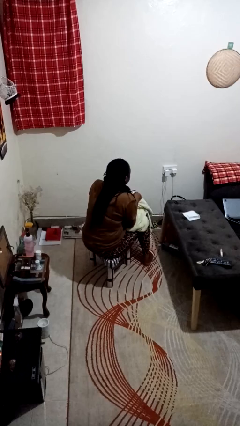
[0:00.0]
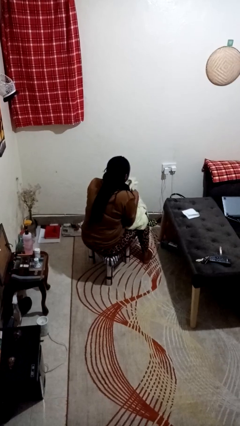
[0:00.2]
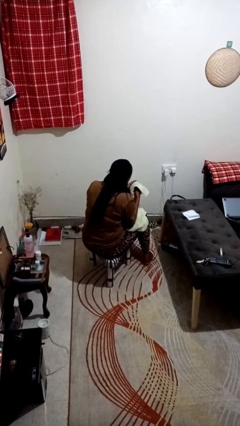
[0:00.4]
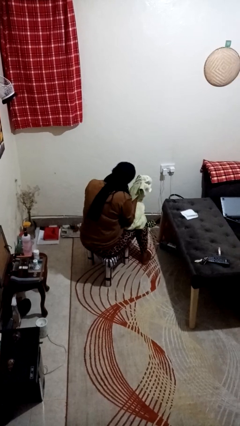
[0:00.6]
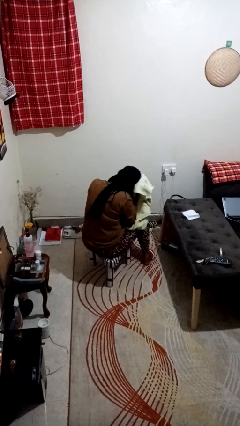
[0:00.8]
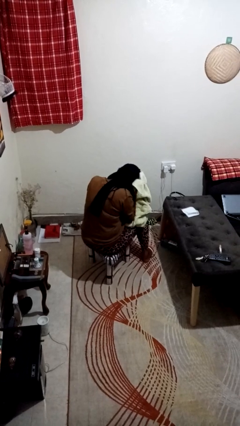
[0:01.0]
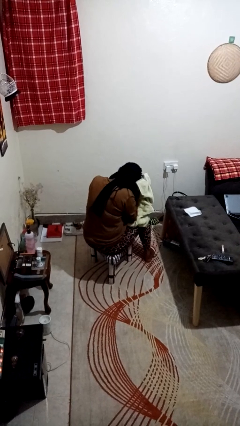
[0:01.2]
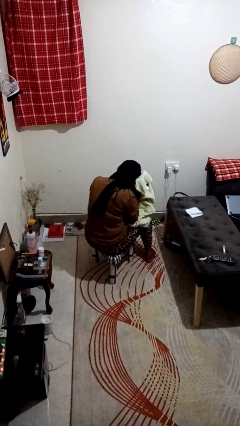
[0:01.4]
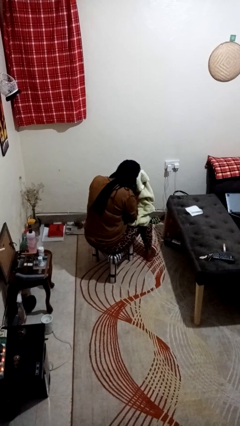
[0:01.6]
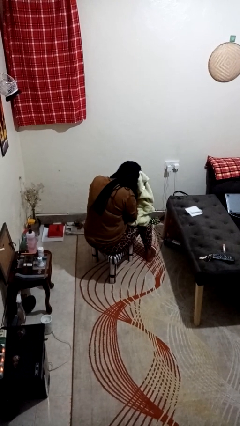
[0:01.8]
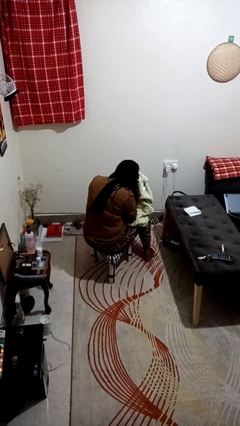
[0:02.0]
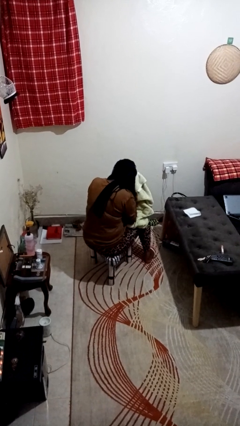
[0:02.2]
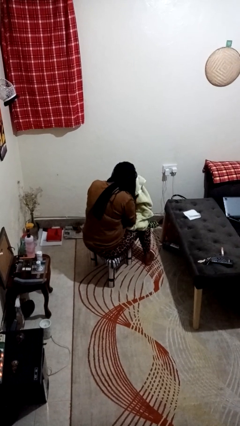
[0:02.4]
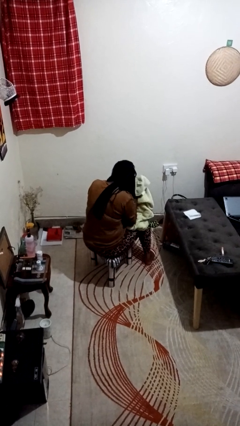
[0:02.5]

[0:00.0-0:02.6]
person dries hair with towel

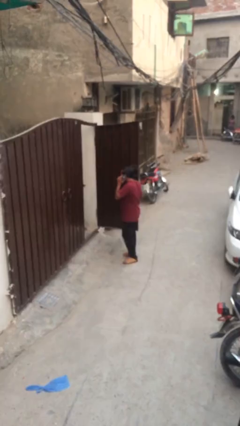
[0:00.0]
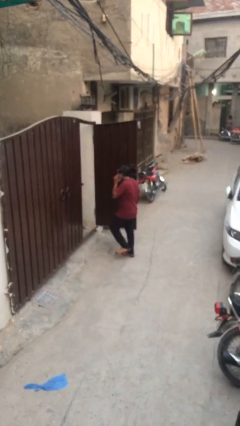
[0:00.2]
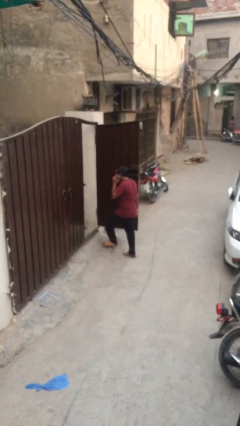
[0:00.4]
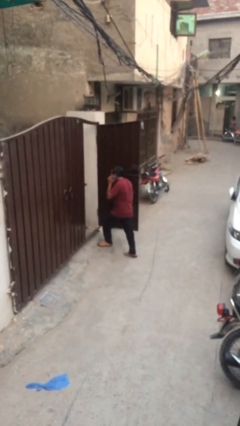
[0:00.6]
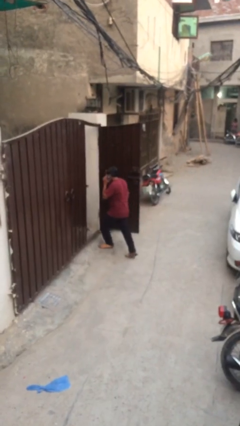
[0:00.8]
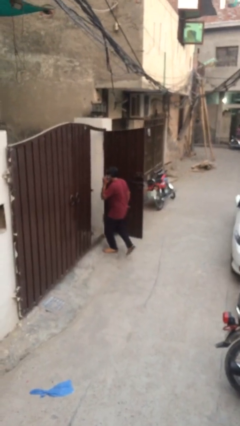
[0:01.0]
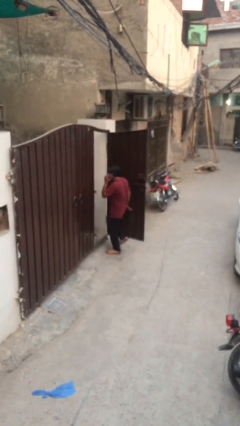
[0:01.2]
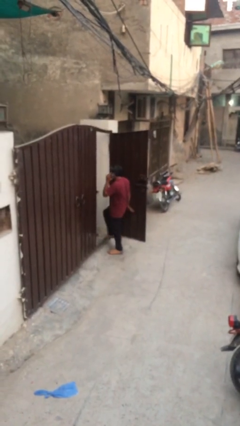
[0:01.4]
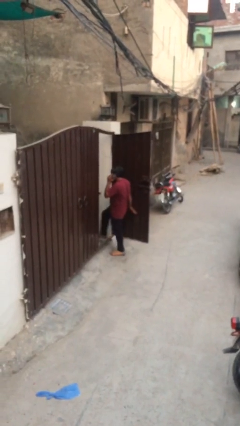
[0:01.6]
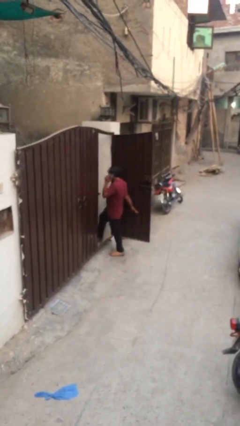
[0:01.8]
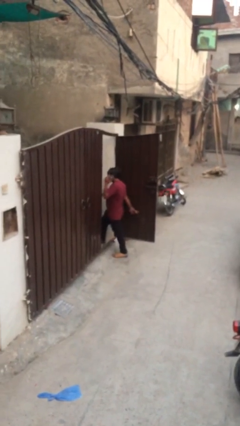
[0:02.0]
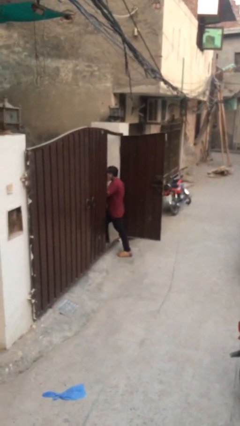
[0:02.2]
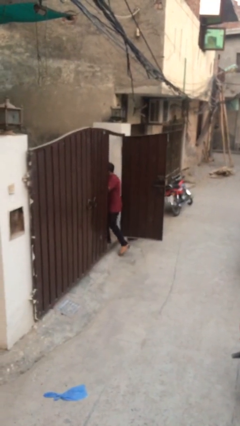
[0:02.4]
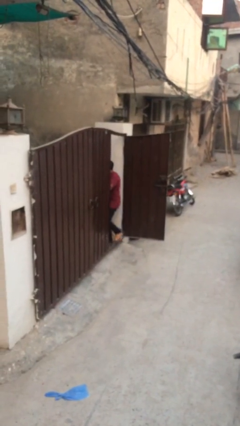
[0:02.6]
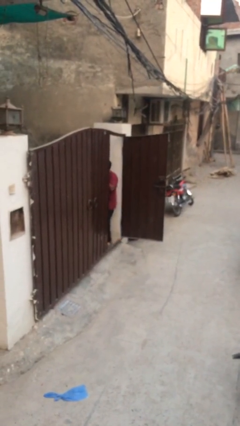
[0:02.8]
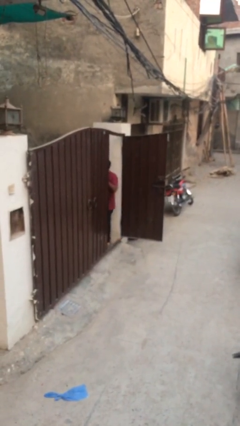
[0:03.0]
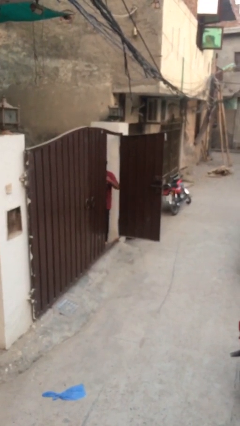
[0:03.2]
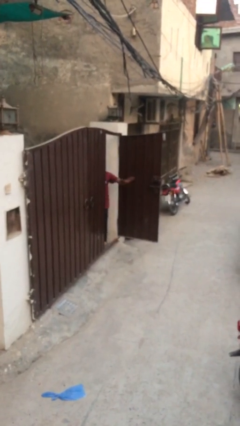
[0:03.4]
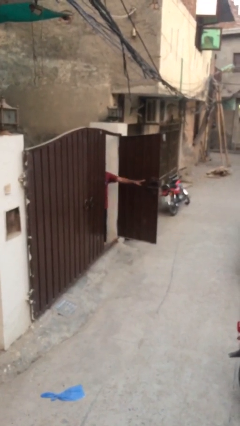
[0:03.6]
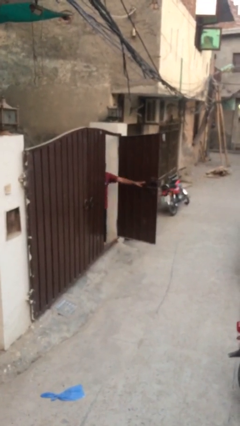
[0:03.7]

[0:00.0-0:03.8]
person exits scene through structure

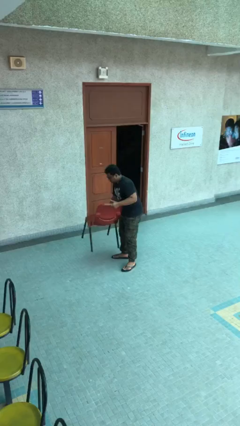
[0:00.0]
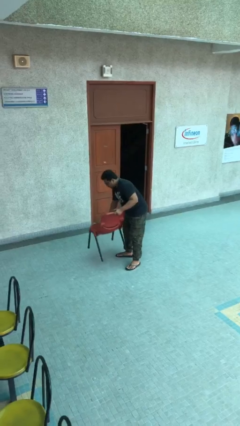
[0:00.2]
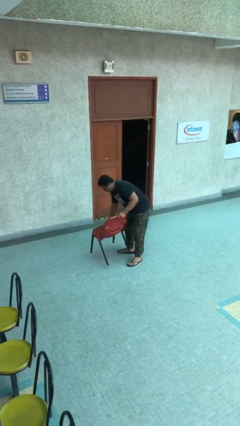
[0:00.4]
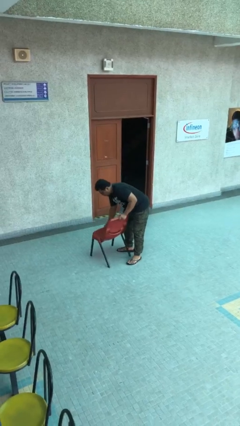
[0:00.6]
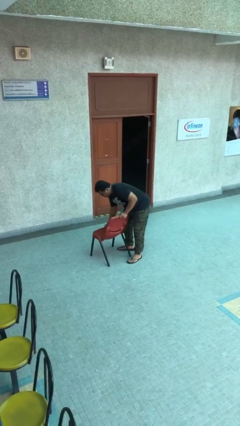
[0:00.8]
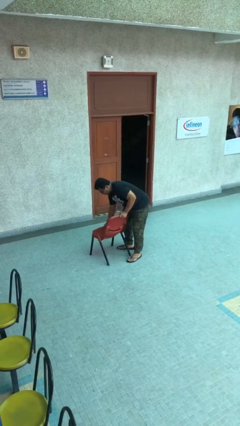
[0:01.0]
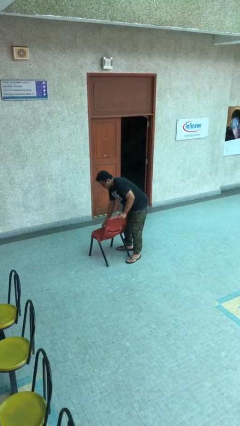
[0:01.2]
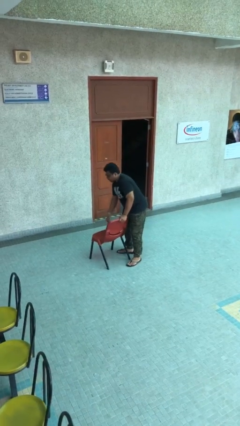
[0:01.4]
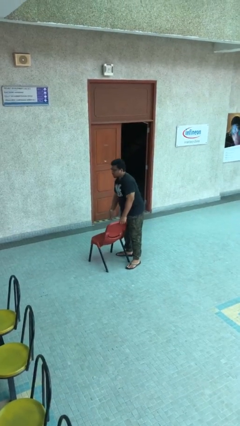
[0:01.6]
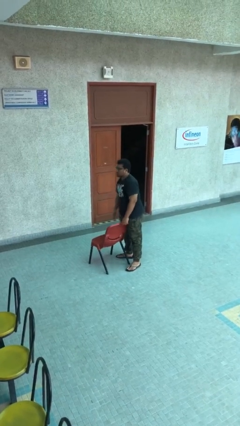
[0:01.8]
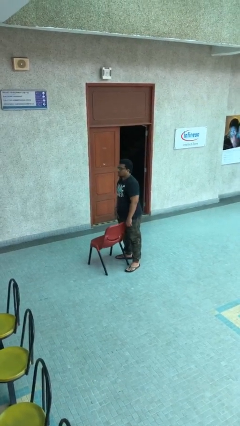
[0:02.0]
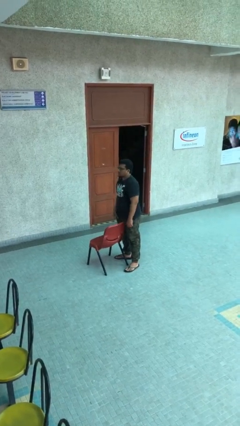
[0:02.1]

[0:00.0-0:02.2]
person puts down object on floor

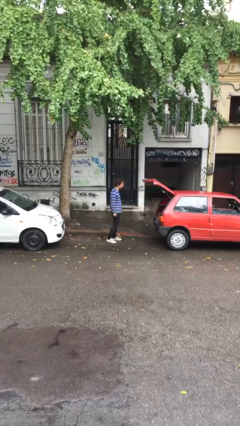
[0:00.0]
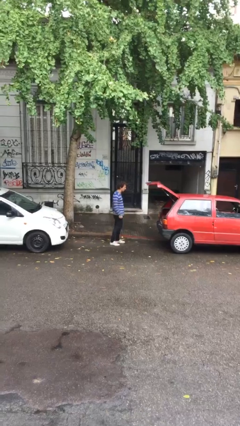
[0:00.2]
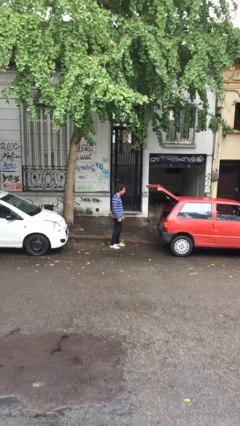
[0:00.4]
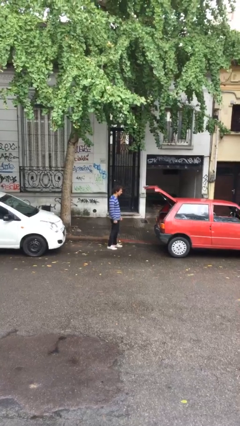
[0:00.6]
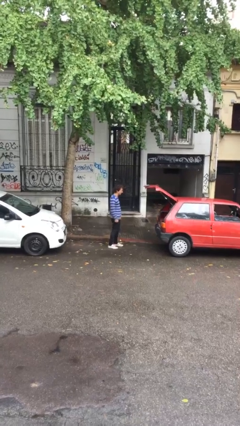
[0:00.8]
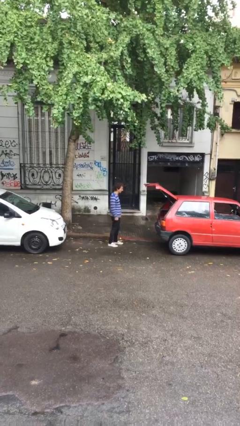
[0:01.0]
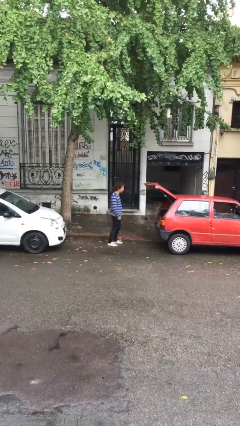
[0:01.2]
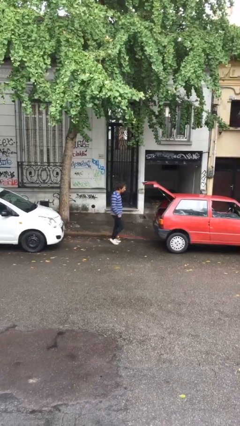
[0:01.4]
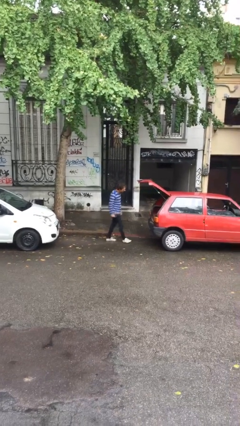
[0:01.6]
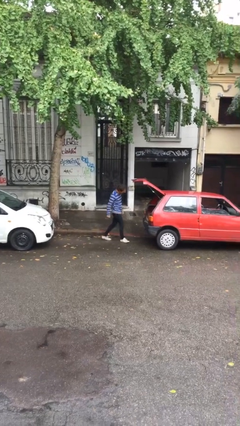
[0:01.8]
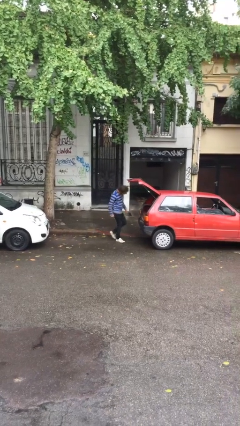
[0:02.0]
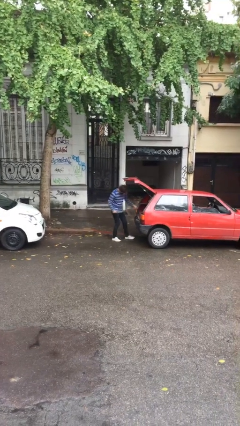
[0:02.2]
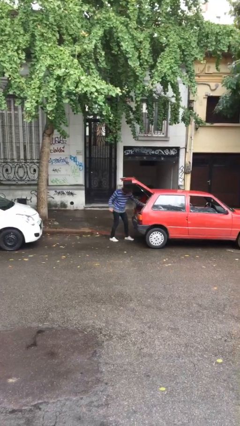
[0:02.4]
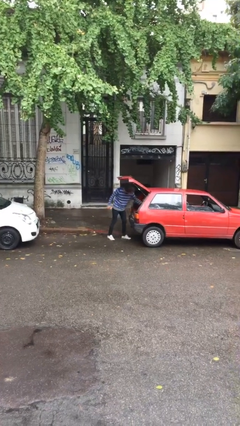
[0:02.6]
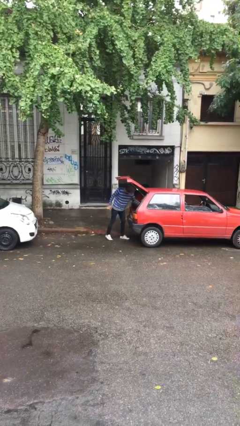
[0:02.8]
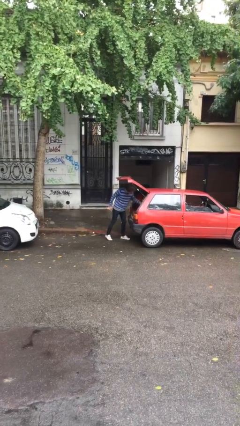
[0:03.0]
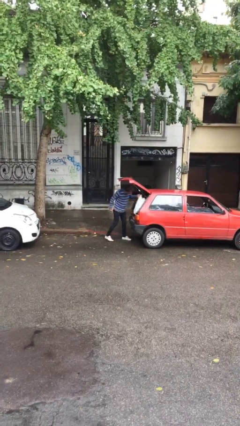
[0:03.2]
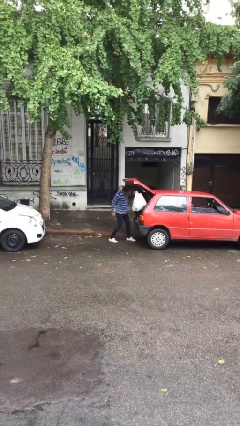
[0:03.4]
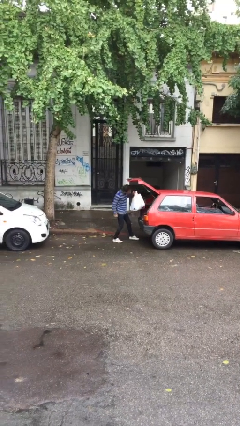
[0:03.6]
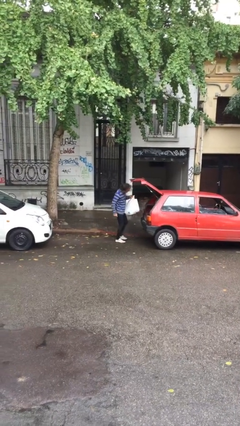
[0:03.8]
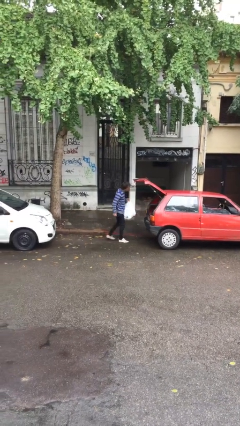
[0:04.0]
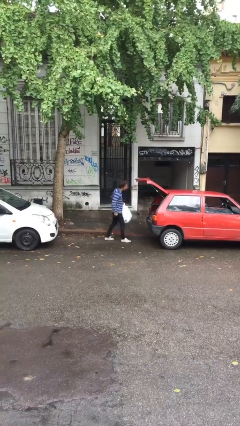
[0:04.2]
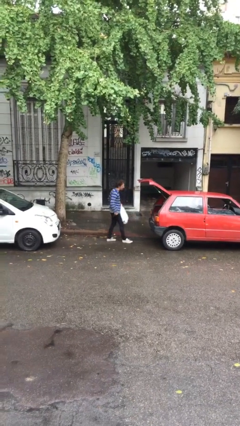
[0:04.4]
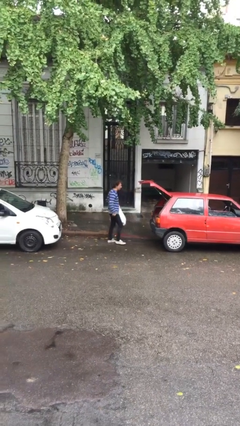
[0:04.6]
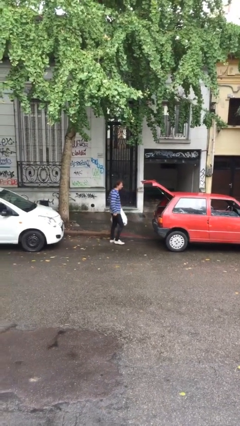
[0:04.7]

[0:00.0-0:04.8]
person unloads car

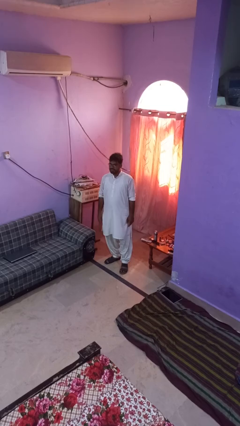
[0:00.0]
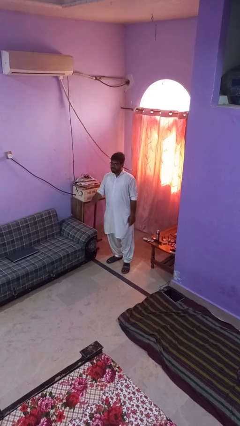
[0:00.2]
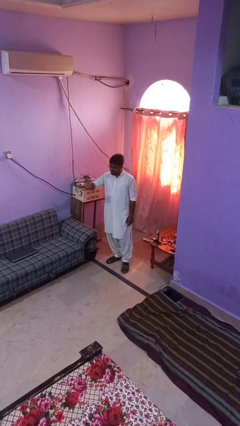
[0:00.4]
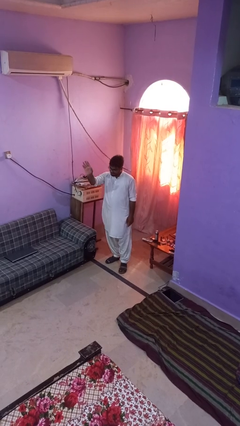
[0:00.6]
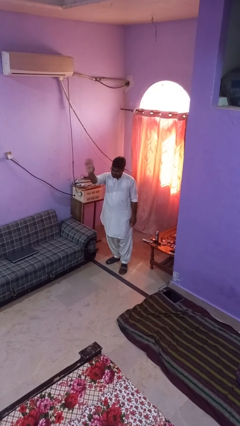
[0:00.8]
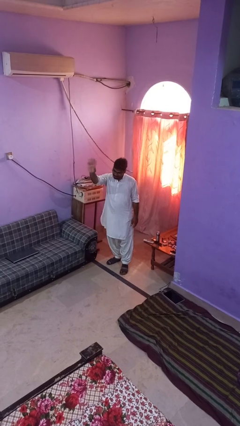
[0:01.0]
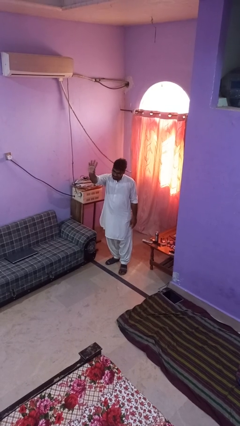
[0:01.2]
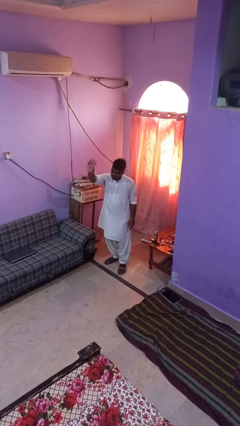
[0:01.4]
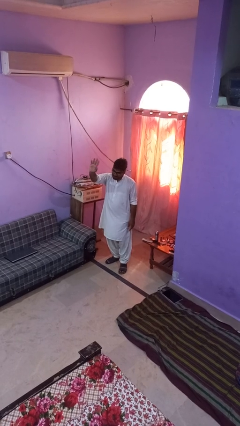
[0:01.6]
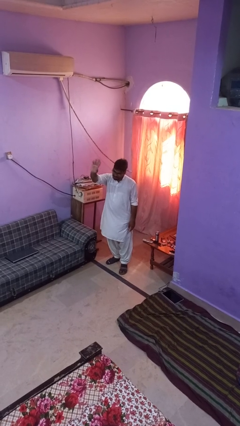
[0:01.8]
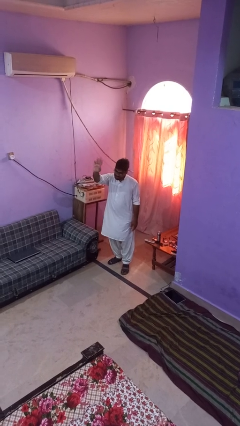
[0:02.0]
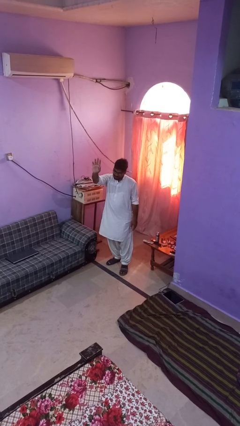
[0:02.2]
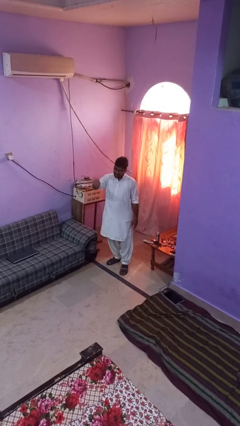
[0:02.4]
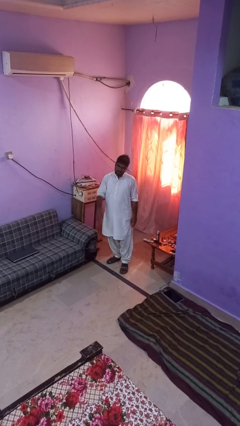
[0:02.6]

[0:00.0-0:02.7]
person waves at person

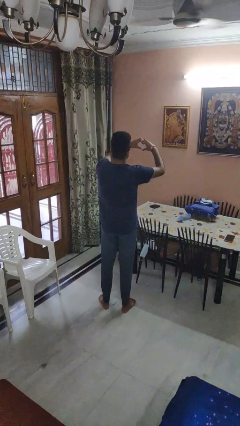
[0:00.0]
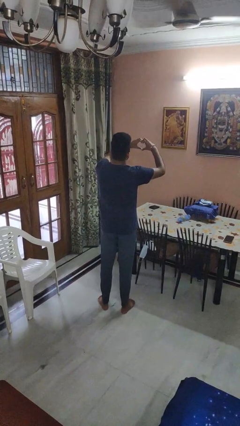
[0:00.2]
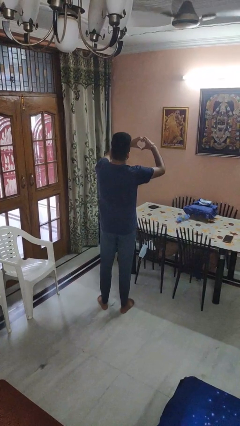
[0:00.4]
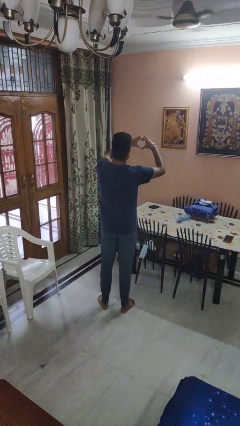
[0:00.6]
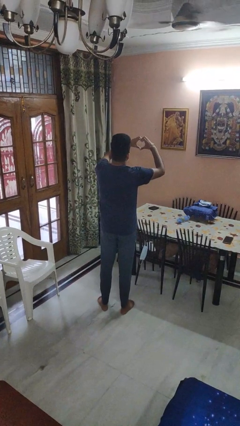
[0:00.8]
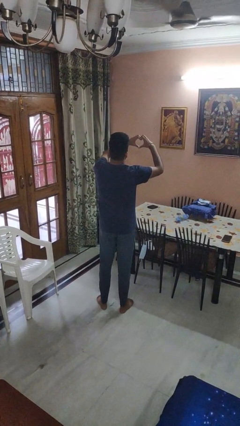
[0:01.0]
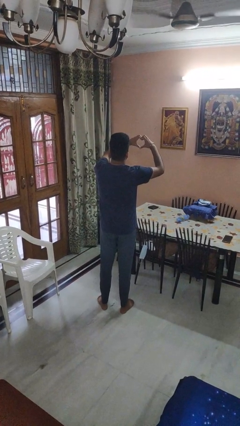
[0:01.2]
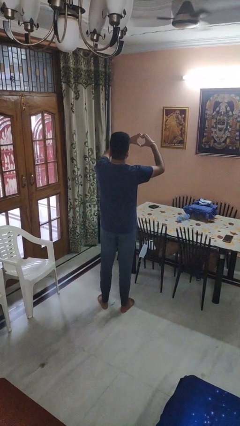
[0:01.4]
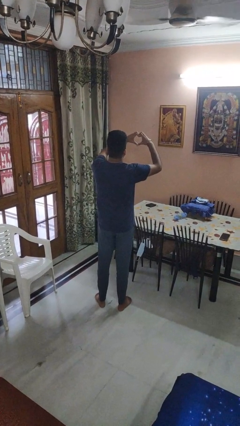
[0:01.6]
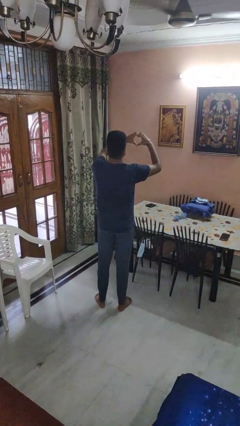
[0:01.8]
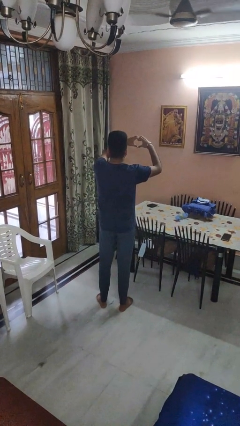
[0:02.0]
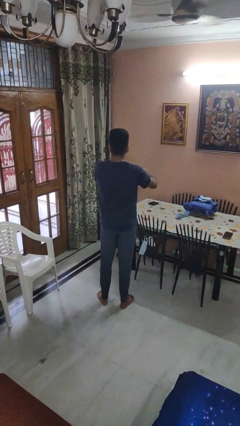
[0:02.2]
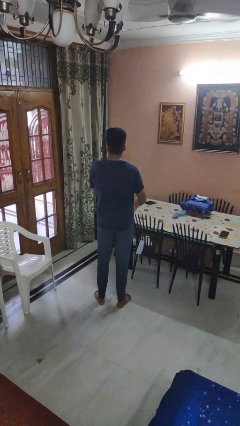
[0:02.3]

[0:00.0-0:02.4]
person gestures heart
